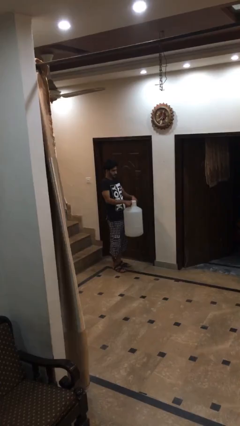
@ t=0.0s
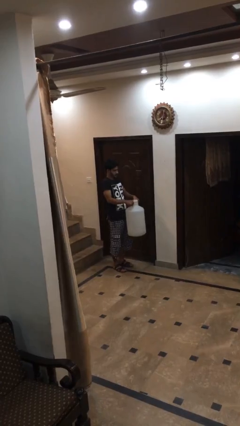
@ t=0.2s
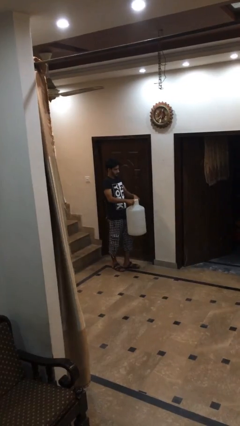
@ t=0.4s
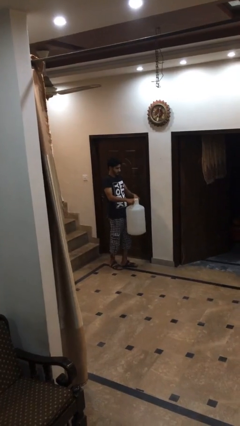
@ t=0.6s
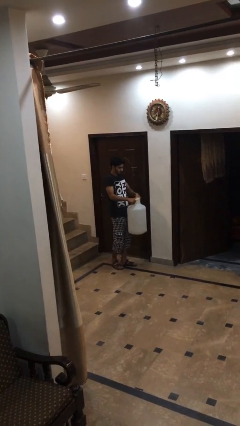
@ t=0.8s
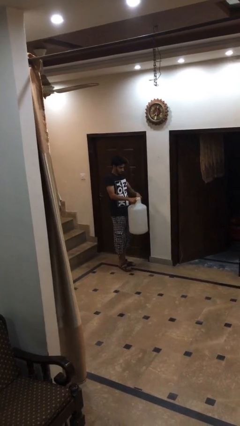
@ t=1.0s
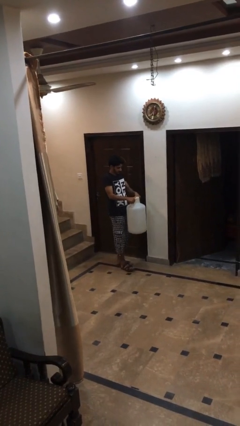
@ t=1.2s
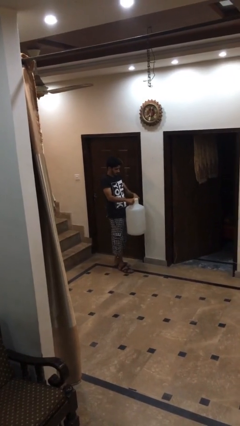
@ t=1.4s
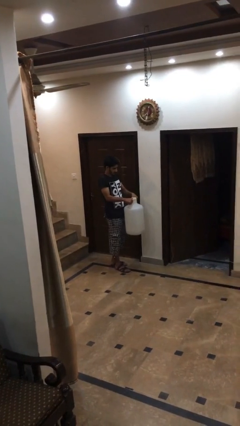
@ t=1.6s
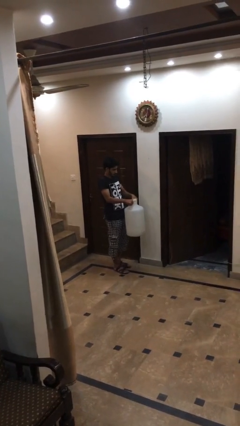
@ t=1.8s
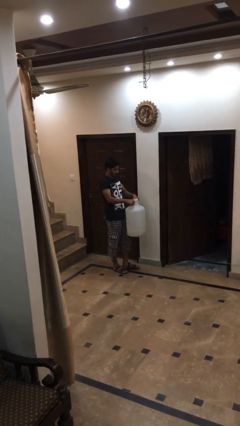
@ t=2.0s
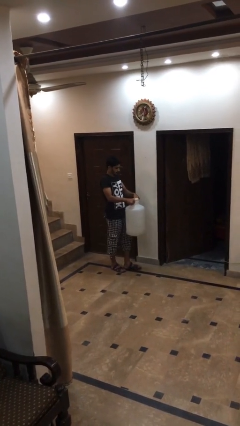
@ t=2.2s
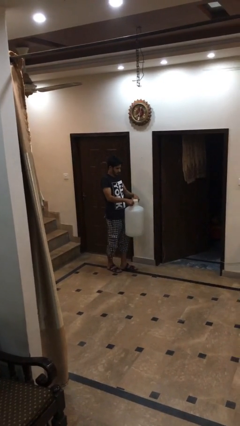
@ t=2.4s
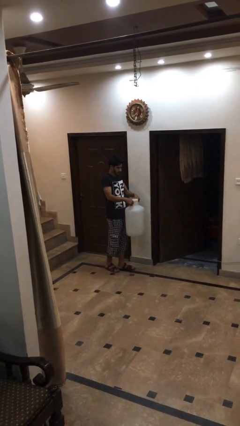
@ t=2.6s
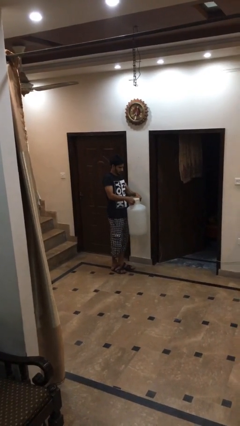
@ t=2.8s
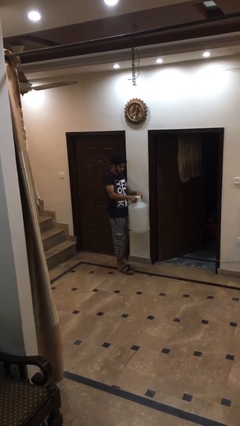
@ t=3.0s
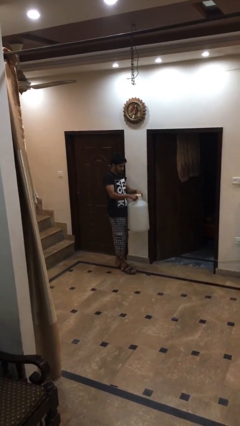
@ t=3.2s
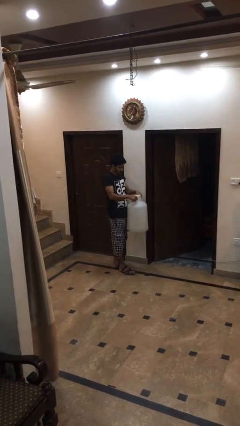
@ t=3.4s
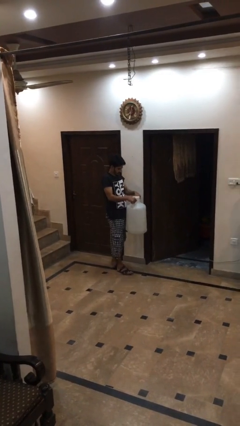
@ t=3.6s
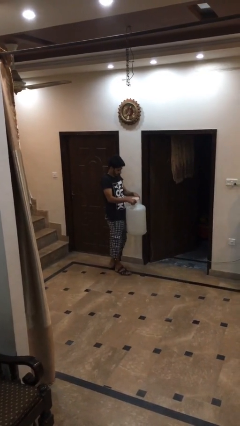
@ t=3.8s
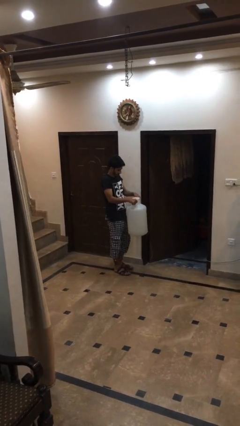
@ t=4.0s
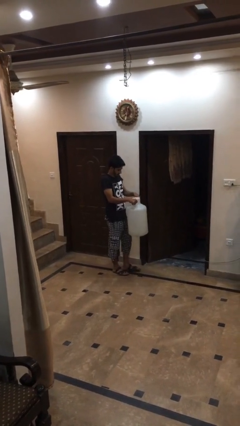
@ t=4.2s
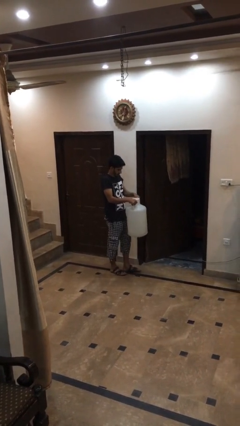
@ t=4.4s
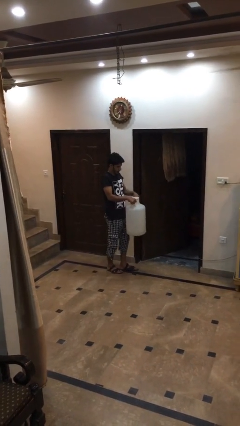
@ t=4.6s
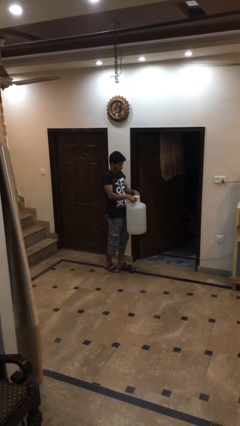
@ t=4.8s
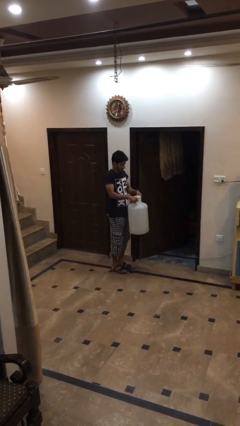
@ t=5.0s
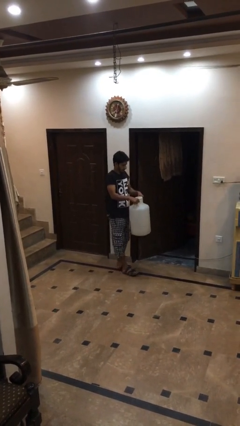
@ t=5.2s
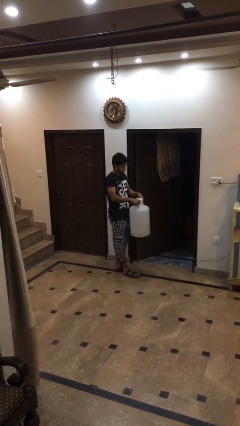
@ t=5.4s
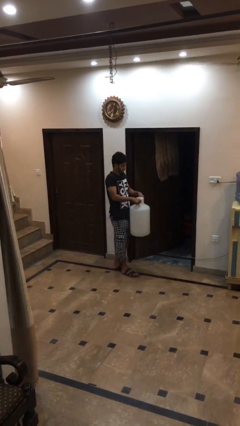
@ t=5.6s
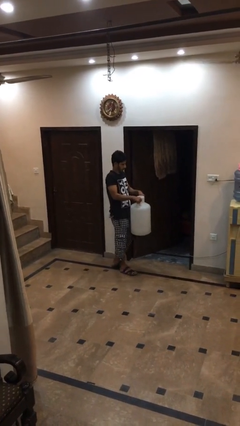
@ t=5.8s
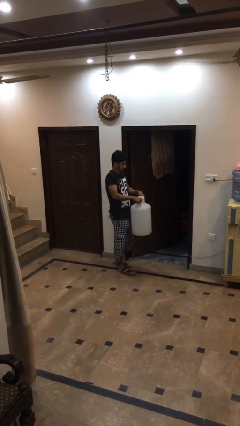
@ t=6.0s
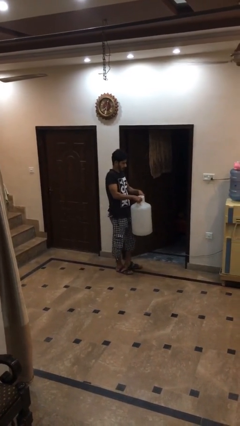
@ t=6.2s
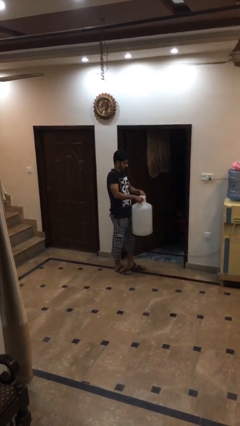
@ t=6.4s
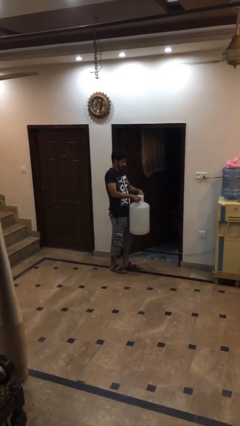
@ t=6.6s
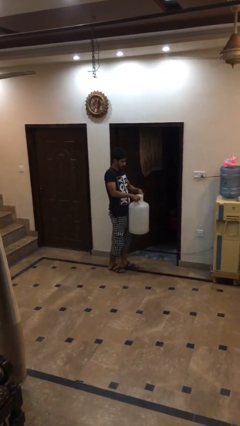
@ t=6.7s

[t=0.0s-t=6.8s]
person carries heavy object

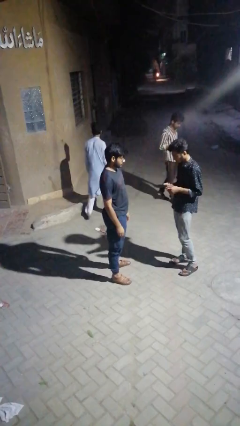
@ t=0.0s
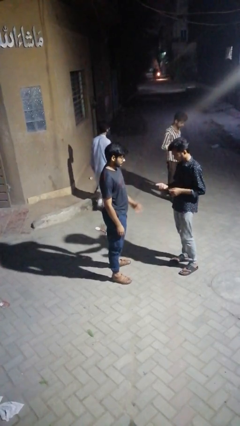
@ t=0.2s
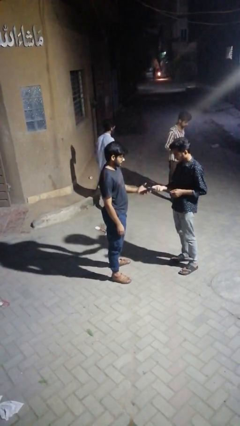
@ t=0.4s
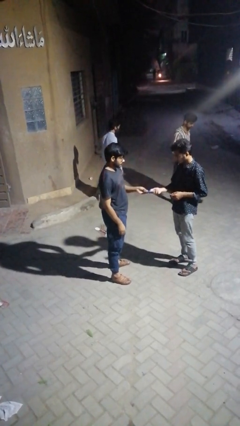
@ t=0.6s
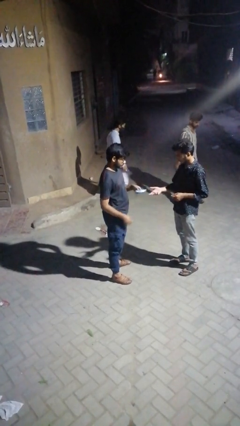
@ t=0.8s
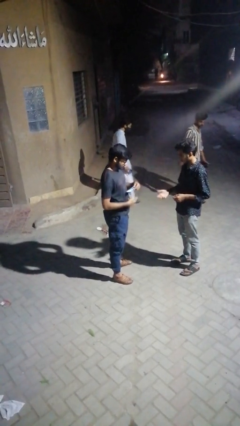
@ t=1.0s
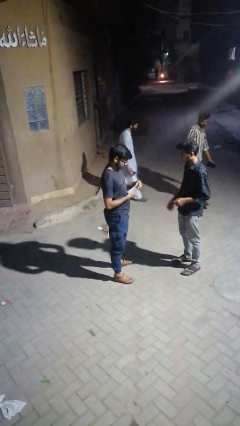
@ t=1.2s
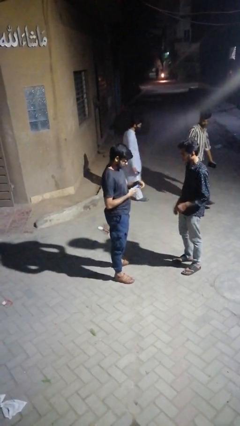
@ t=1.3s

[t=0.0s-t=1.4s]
person transfers object to person

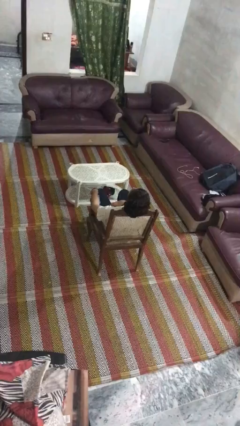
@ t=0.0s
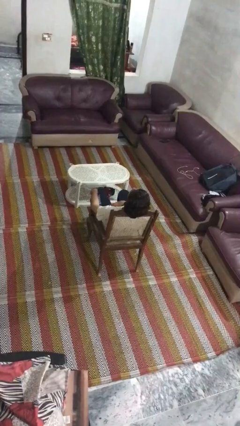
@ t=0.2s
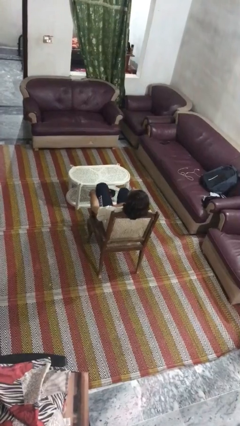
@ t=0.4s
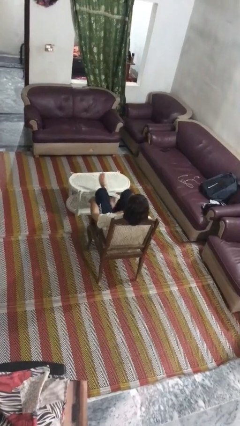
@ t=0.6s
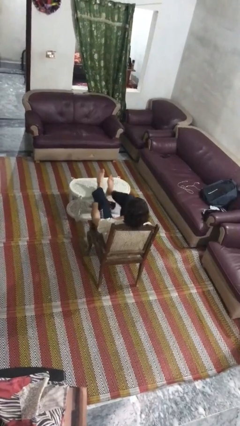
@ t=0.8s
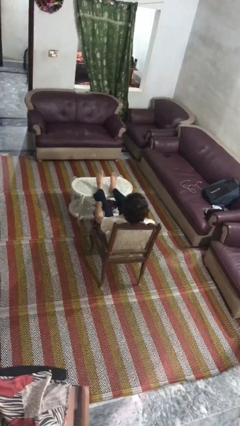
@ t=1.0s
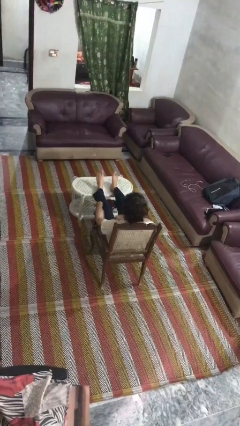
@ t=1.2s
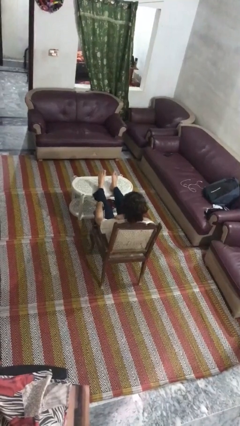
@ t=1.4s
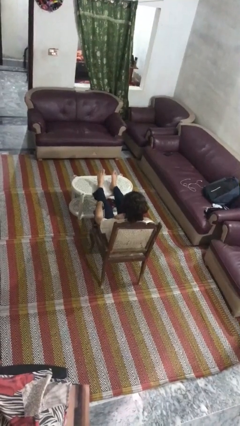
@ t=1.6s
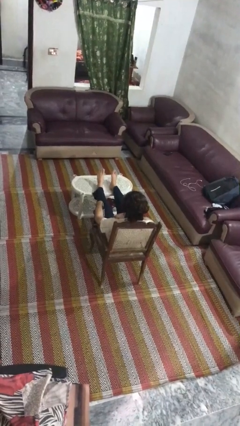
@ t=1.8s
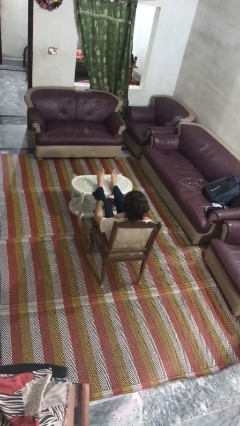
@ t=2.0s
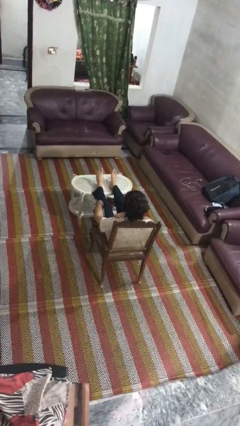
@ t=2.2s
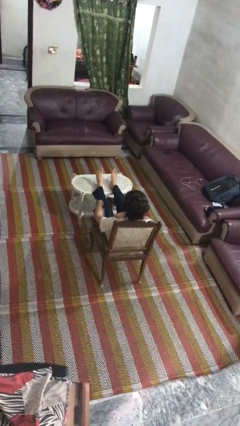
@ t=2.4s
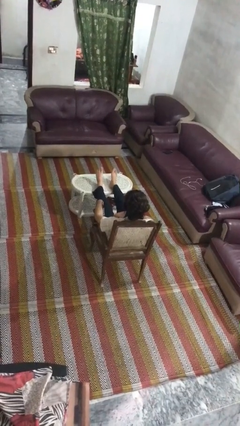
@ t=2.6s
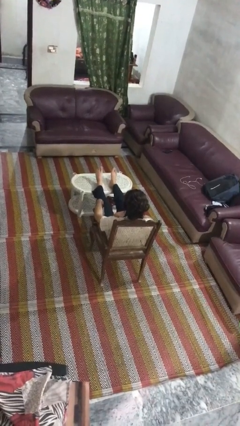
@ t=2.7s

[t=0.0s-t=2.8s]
person puts feet up

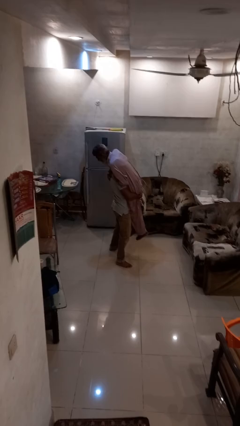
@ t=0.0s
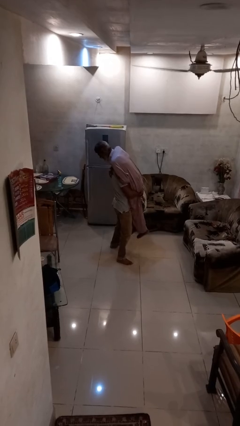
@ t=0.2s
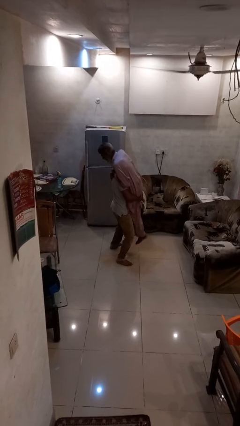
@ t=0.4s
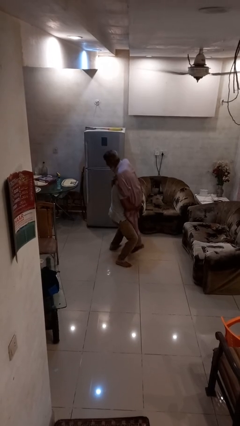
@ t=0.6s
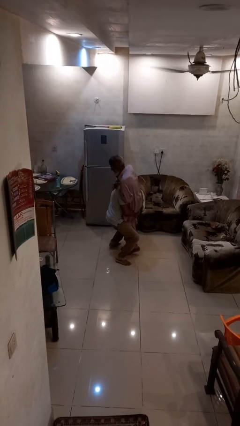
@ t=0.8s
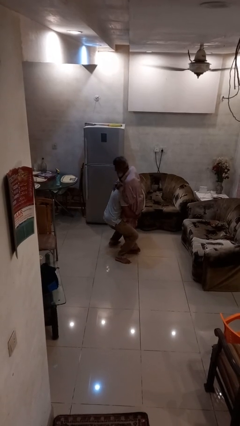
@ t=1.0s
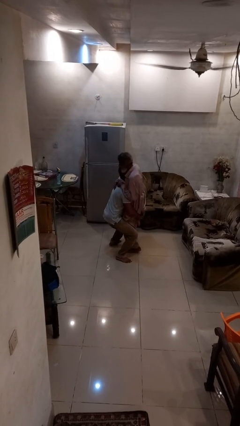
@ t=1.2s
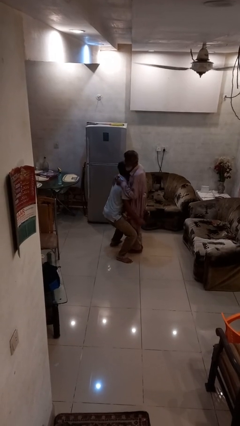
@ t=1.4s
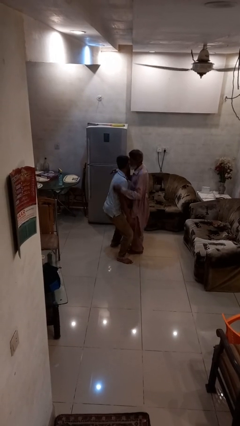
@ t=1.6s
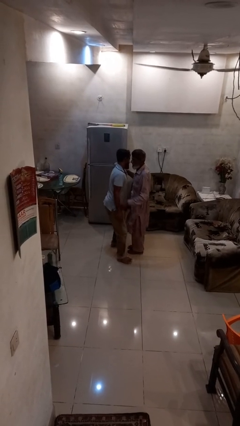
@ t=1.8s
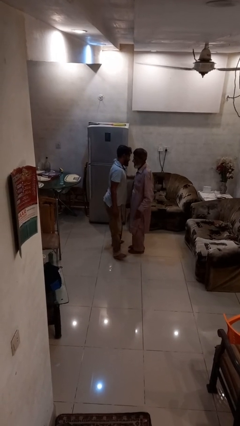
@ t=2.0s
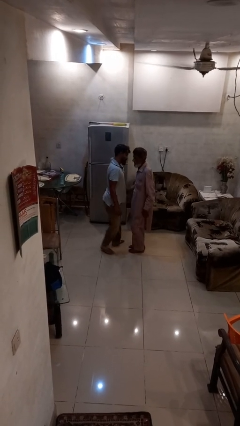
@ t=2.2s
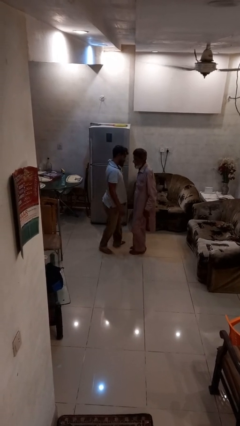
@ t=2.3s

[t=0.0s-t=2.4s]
person puts down person

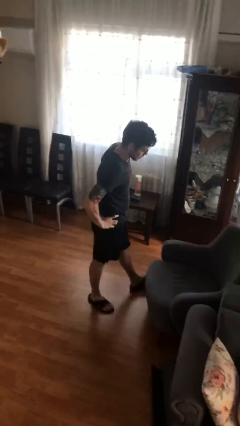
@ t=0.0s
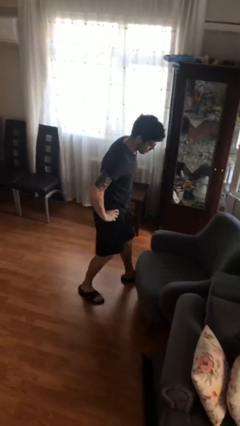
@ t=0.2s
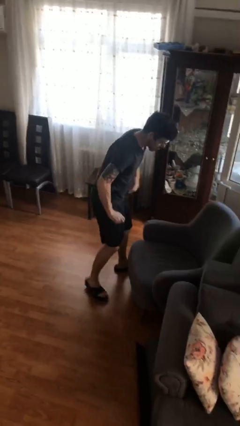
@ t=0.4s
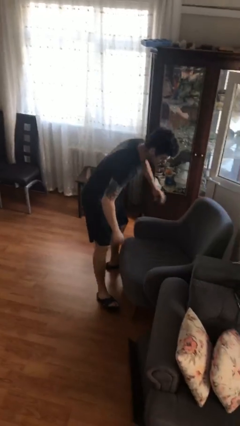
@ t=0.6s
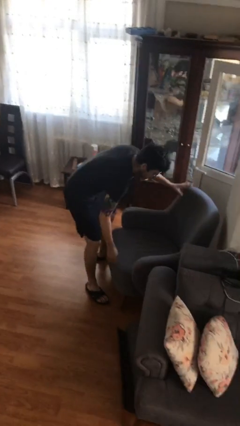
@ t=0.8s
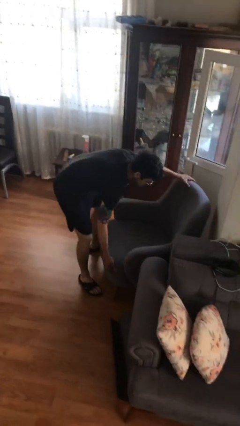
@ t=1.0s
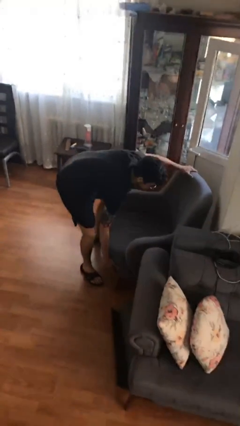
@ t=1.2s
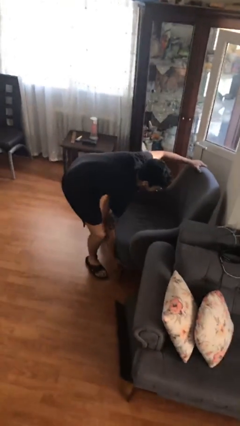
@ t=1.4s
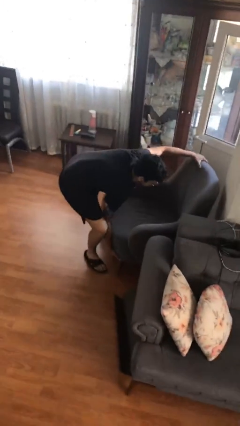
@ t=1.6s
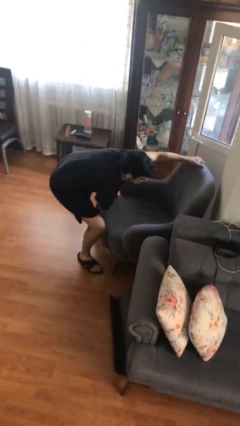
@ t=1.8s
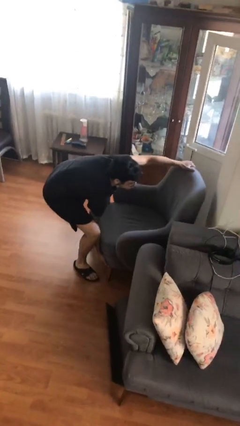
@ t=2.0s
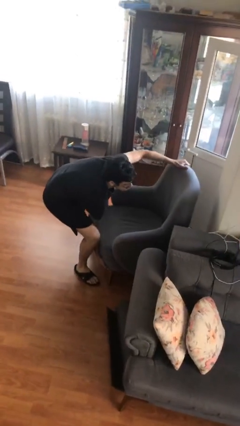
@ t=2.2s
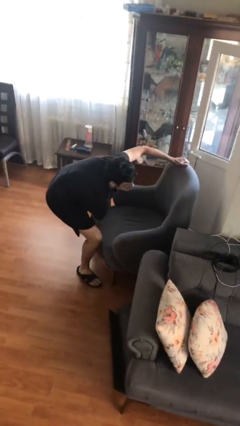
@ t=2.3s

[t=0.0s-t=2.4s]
person picks up object from floor

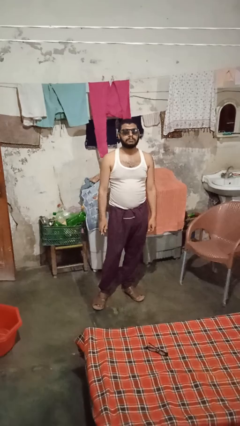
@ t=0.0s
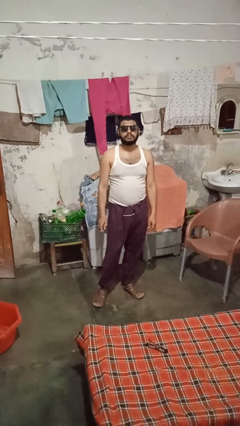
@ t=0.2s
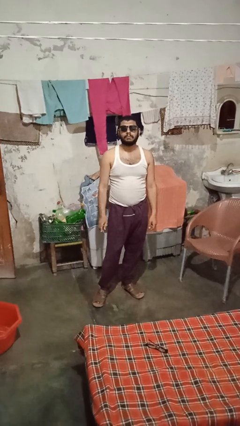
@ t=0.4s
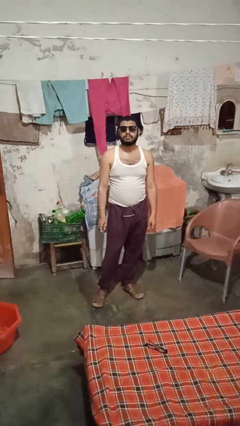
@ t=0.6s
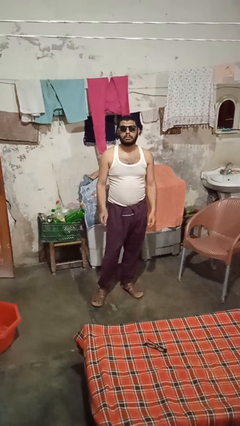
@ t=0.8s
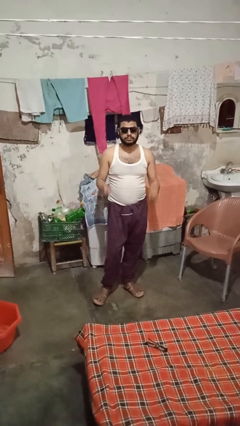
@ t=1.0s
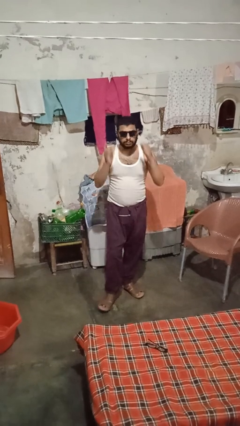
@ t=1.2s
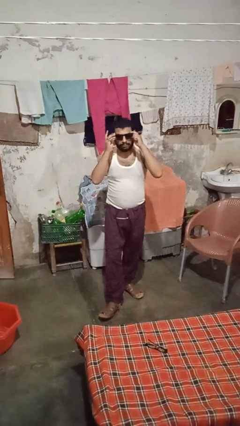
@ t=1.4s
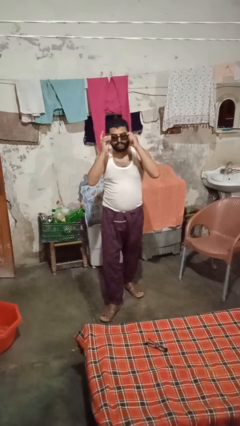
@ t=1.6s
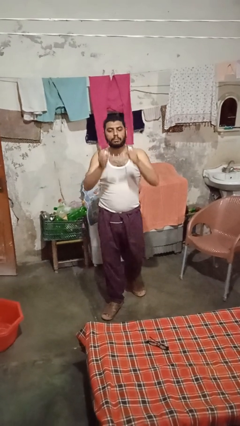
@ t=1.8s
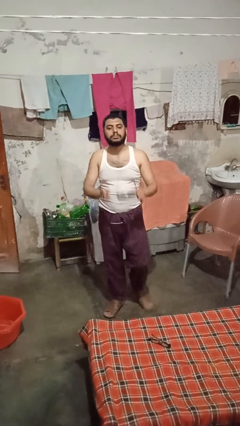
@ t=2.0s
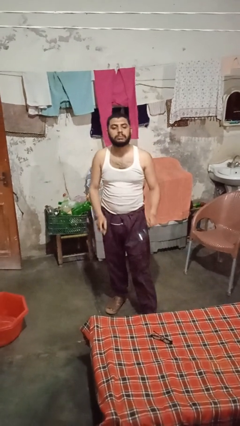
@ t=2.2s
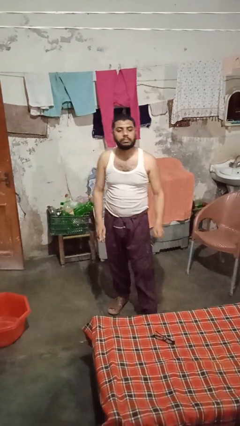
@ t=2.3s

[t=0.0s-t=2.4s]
person takes off sunglasses
